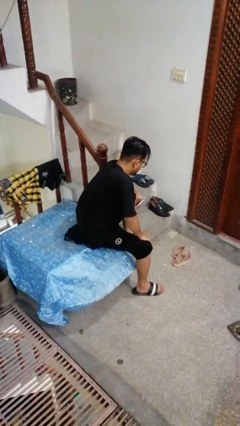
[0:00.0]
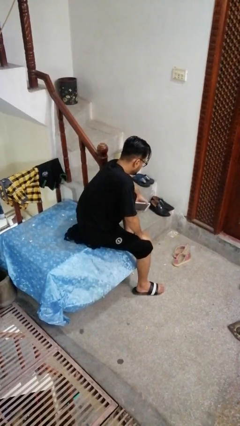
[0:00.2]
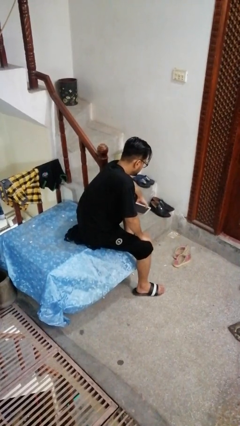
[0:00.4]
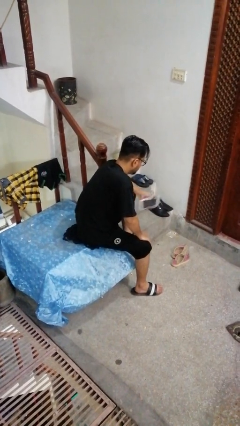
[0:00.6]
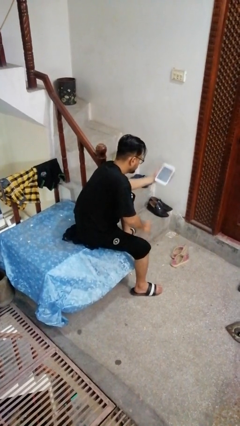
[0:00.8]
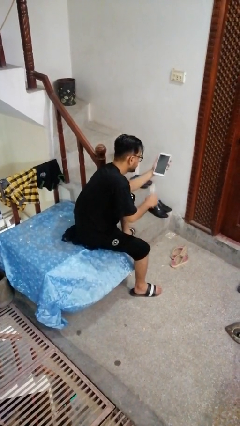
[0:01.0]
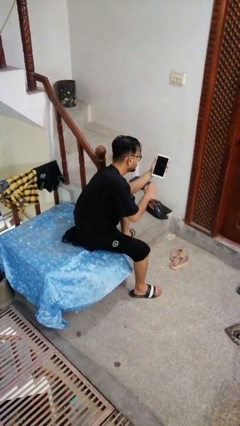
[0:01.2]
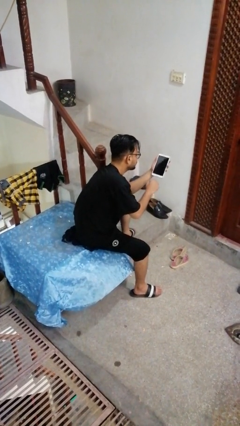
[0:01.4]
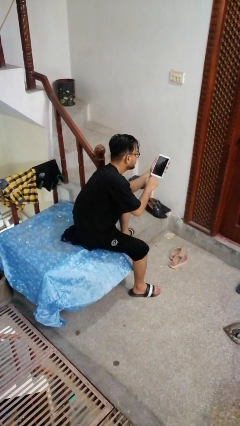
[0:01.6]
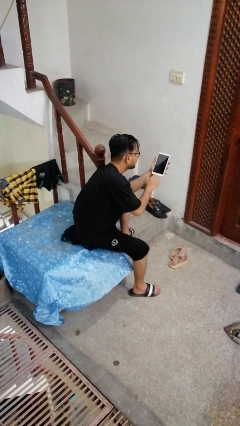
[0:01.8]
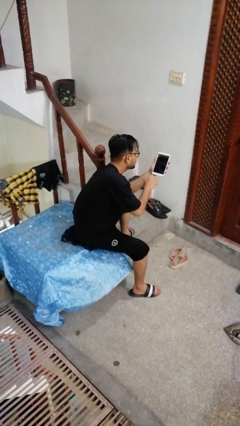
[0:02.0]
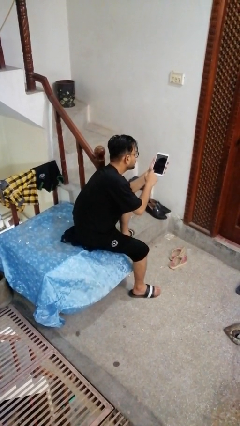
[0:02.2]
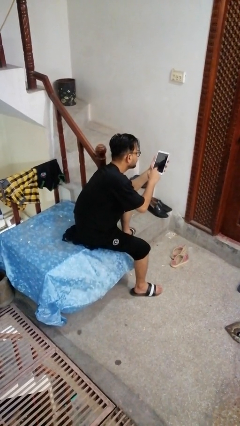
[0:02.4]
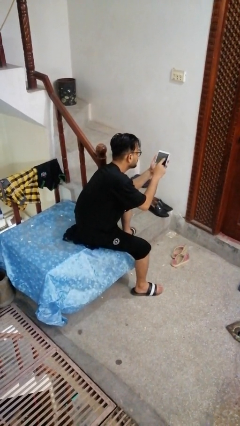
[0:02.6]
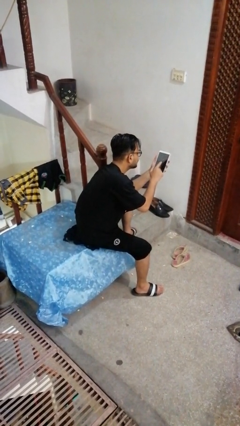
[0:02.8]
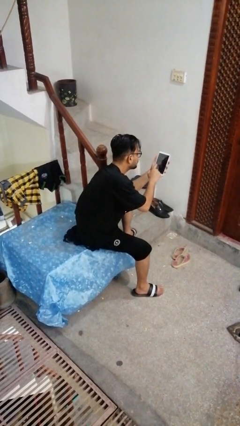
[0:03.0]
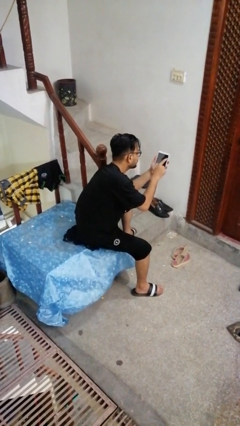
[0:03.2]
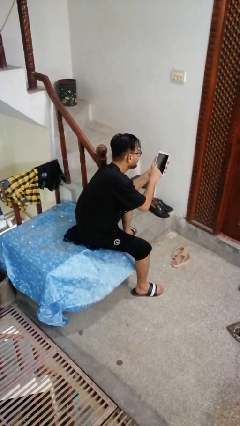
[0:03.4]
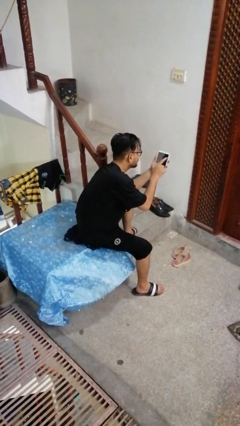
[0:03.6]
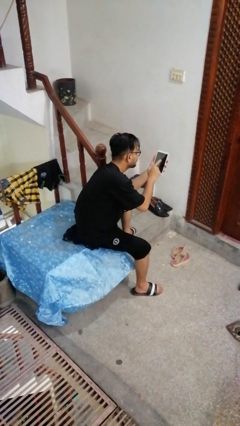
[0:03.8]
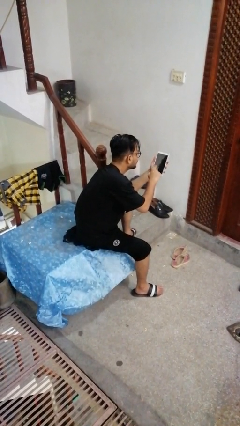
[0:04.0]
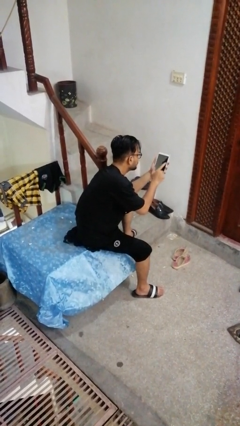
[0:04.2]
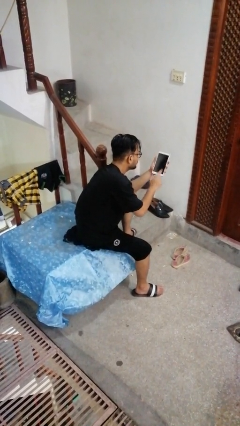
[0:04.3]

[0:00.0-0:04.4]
person interacts with tablet

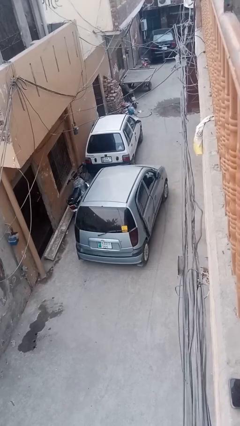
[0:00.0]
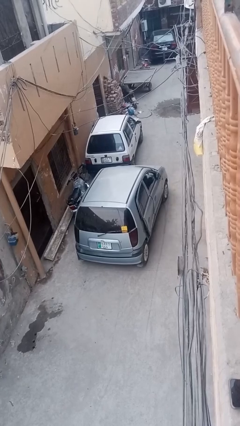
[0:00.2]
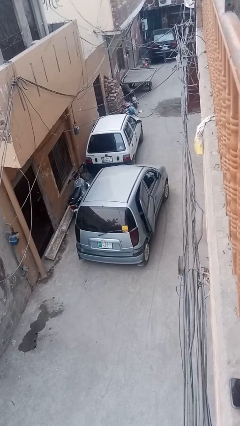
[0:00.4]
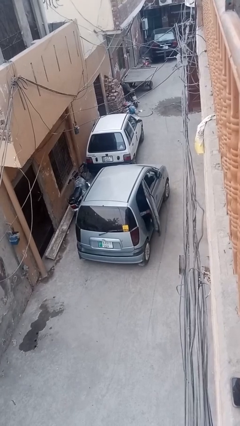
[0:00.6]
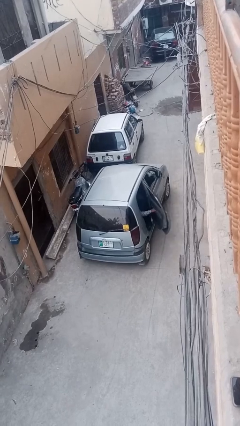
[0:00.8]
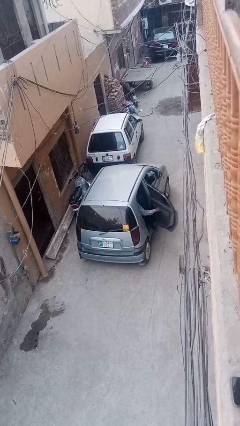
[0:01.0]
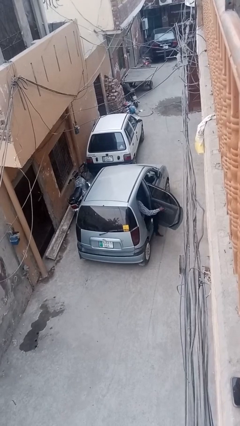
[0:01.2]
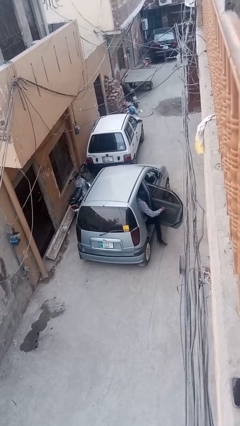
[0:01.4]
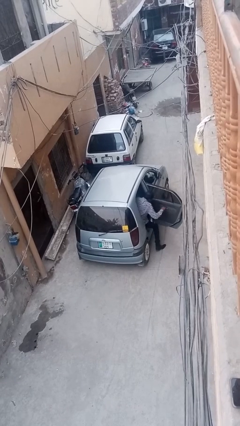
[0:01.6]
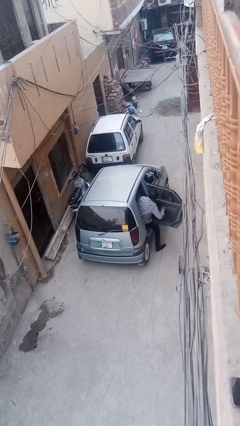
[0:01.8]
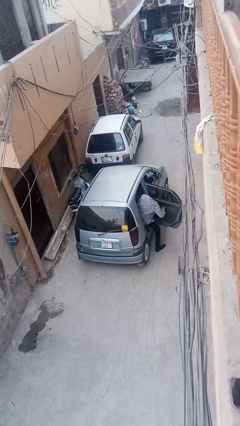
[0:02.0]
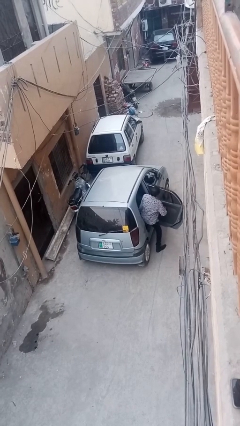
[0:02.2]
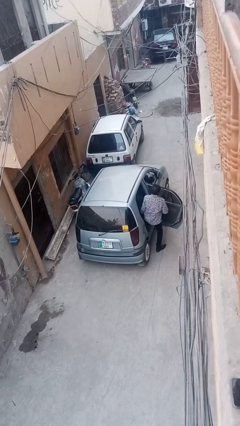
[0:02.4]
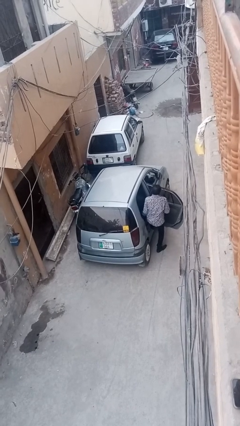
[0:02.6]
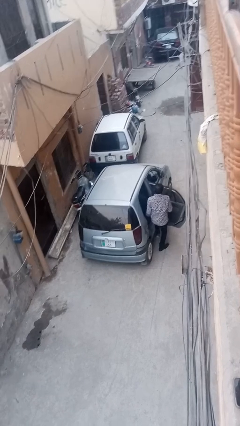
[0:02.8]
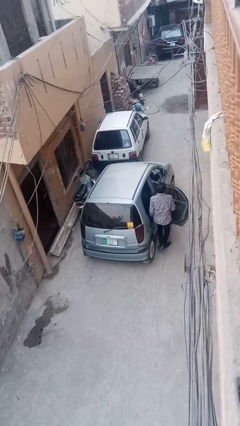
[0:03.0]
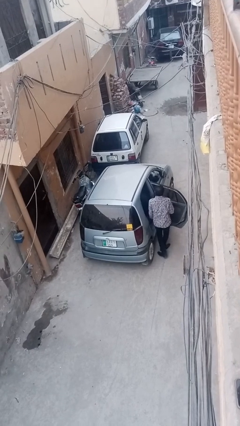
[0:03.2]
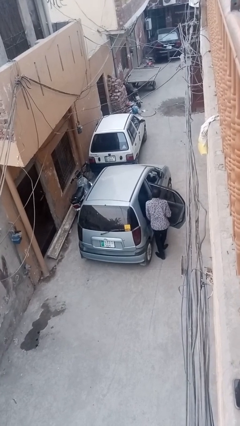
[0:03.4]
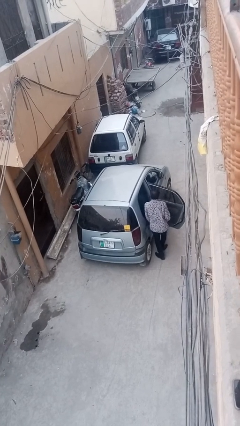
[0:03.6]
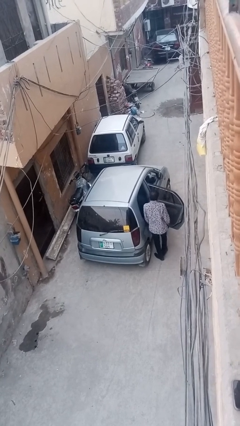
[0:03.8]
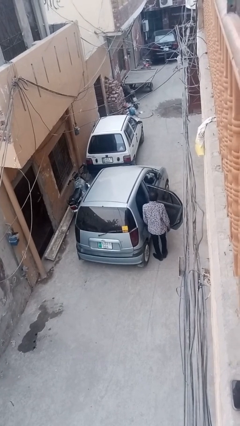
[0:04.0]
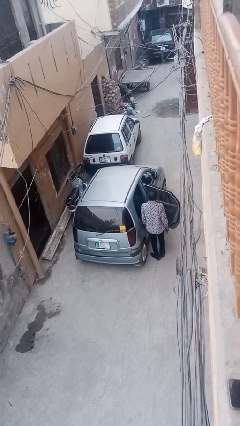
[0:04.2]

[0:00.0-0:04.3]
car drops off person

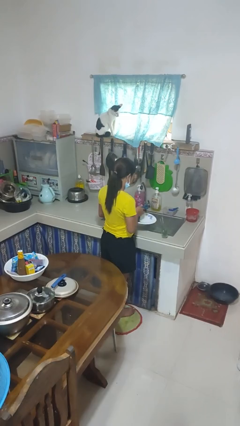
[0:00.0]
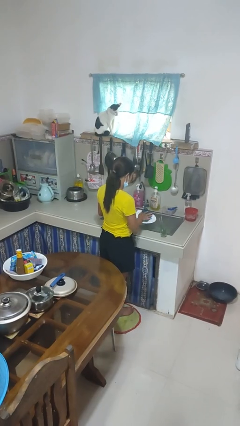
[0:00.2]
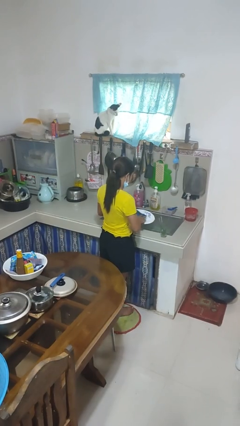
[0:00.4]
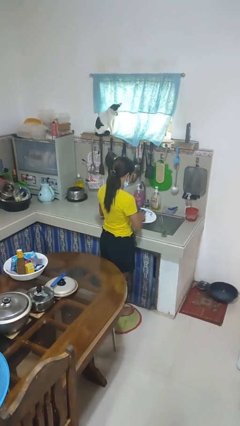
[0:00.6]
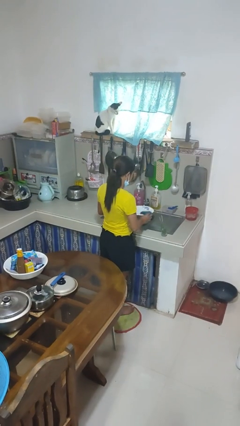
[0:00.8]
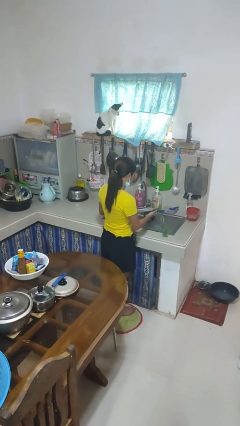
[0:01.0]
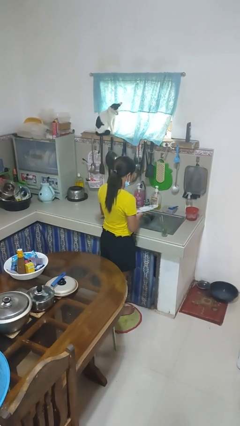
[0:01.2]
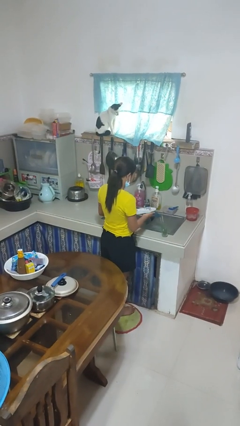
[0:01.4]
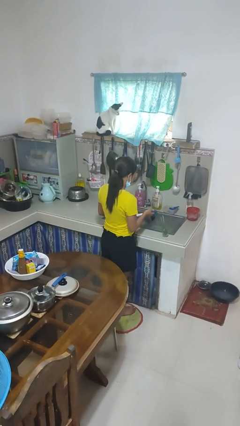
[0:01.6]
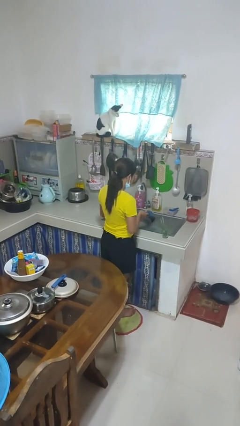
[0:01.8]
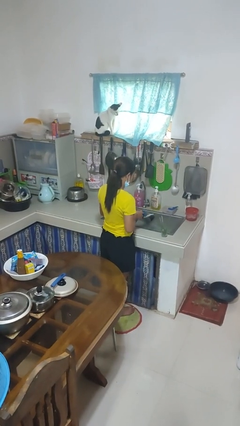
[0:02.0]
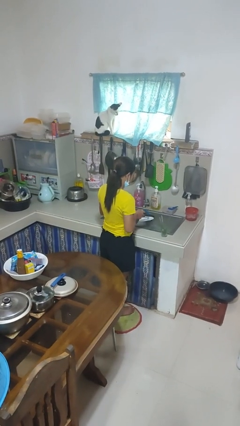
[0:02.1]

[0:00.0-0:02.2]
person dries dish

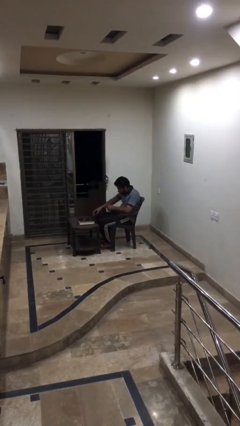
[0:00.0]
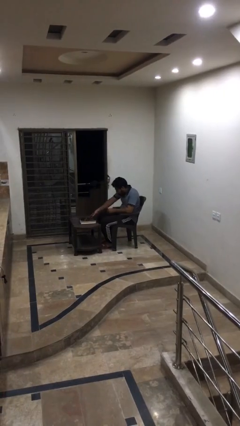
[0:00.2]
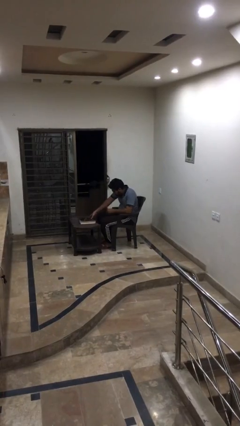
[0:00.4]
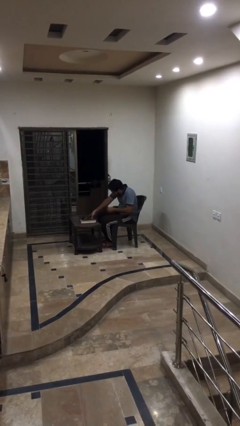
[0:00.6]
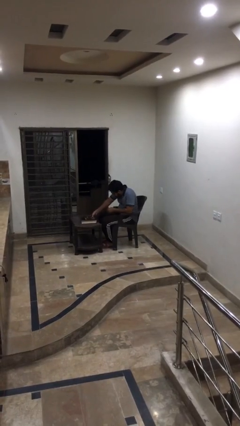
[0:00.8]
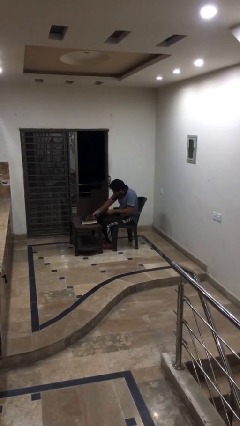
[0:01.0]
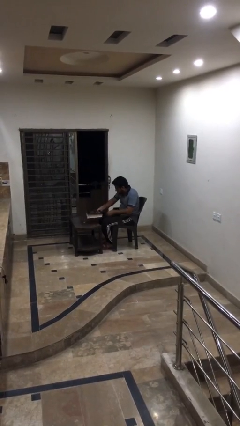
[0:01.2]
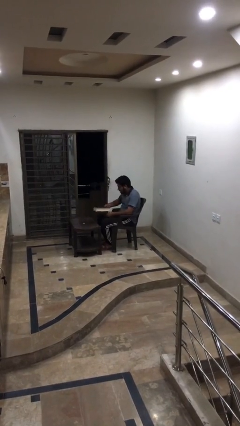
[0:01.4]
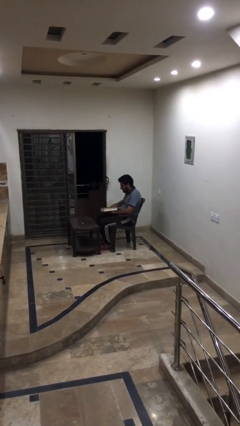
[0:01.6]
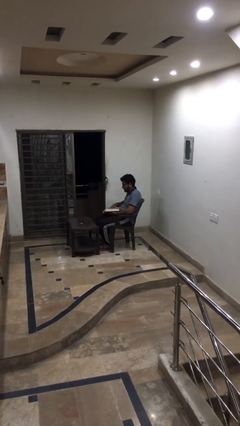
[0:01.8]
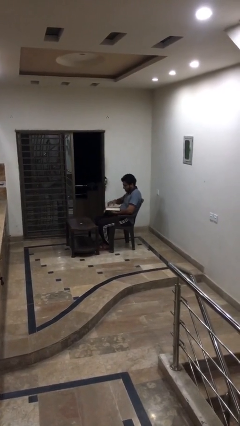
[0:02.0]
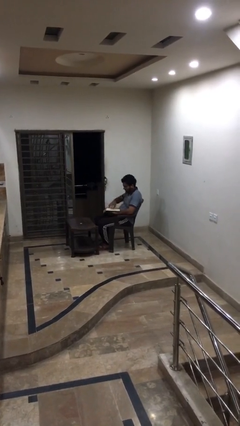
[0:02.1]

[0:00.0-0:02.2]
person picks up object from table

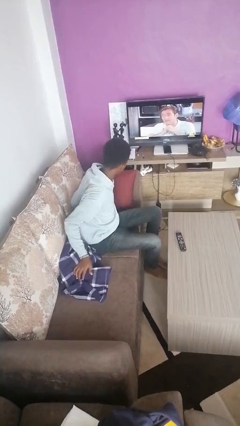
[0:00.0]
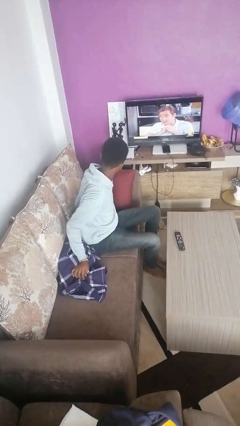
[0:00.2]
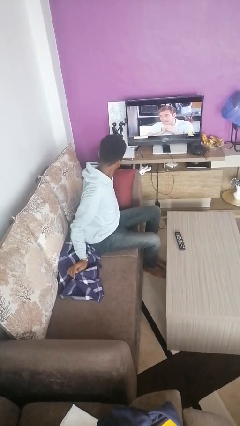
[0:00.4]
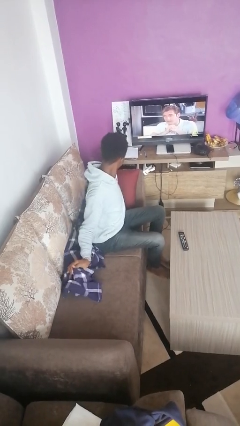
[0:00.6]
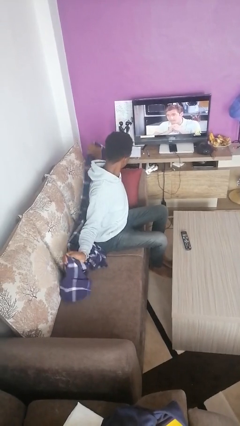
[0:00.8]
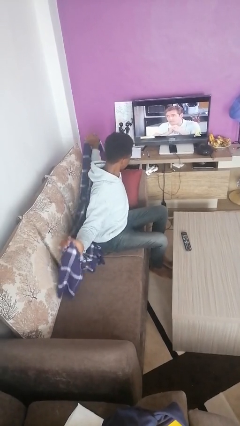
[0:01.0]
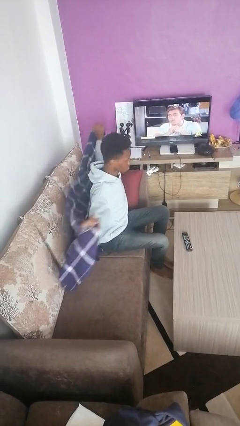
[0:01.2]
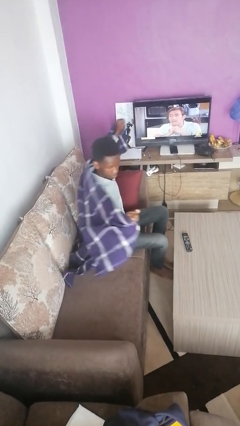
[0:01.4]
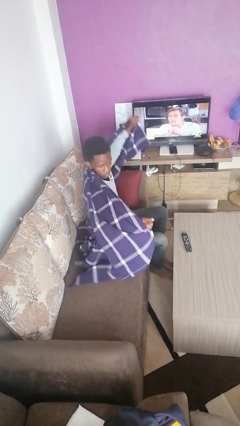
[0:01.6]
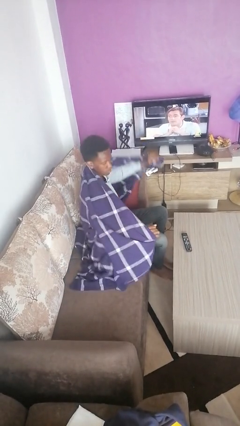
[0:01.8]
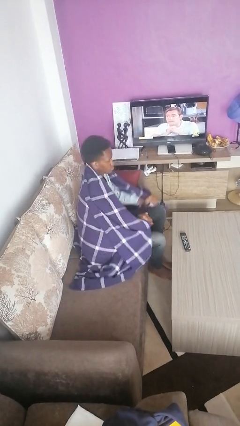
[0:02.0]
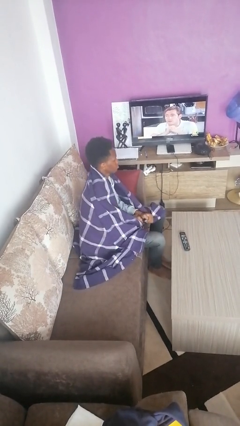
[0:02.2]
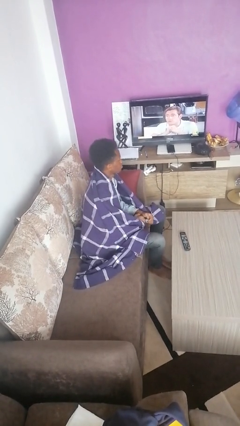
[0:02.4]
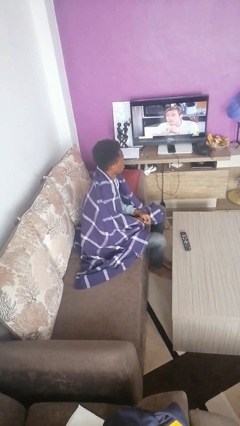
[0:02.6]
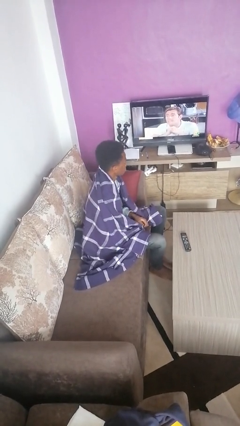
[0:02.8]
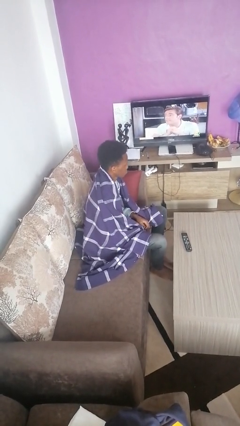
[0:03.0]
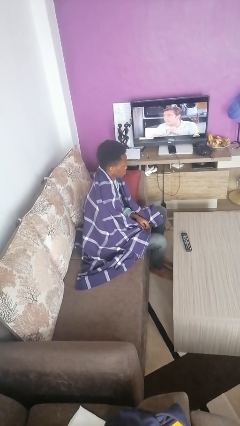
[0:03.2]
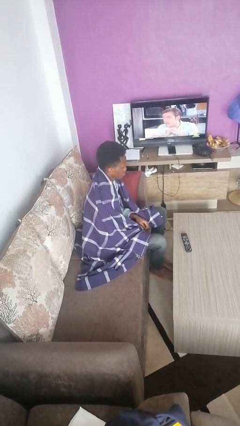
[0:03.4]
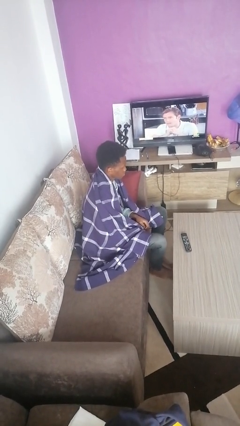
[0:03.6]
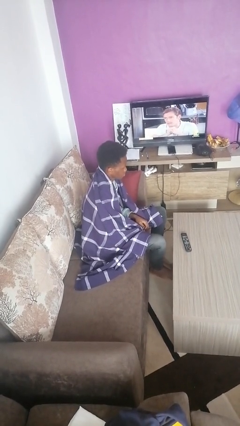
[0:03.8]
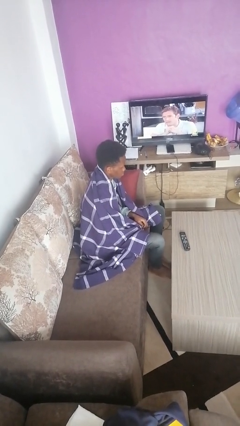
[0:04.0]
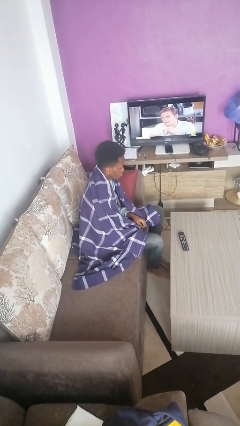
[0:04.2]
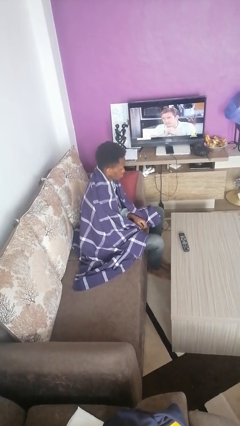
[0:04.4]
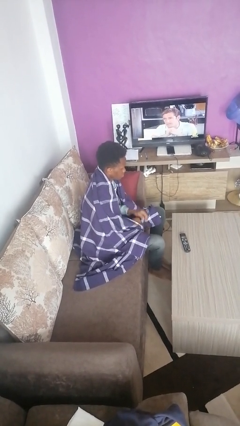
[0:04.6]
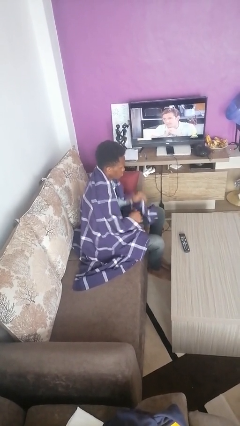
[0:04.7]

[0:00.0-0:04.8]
person covers with blanket
